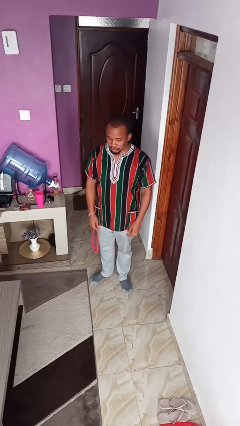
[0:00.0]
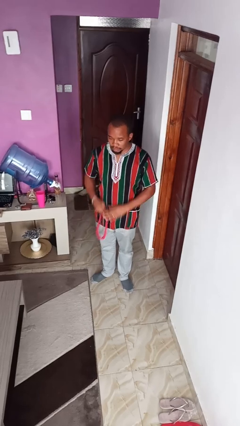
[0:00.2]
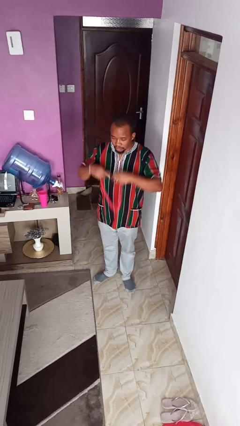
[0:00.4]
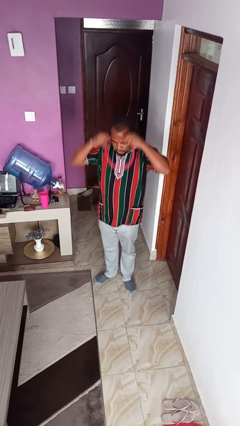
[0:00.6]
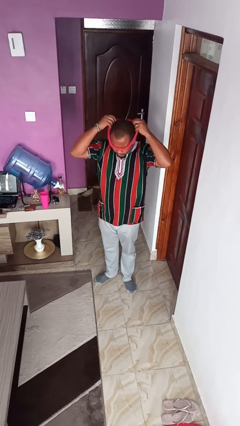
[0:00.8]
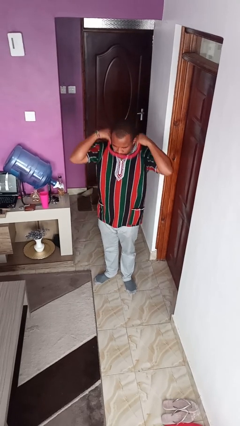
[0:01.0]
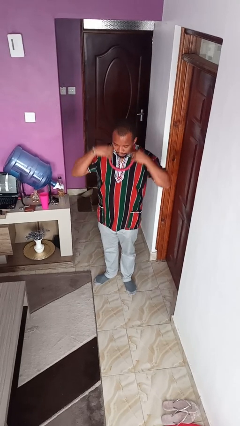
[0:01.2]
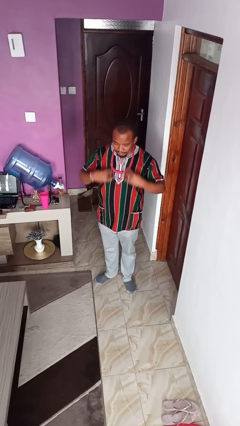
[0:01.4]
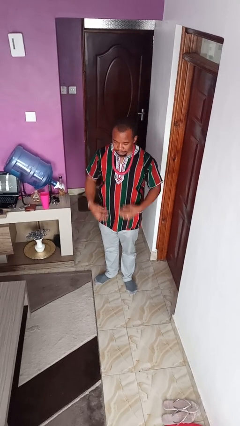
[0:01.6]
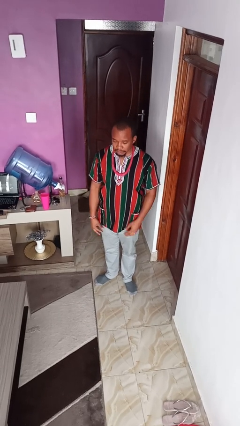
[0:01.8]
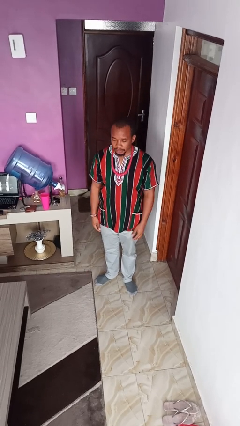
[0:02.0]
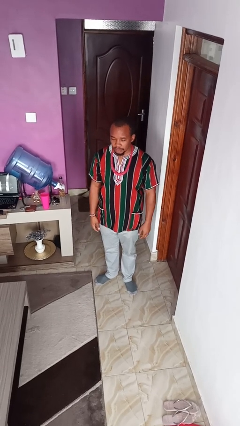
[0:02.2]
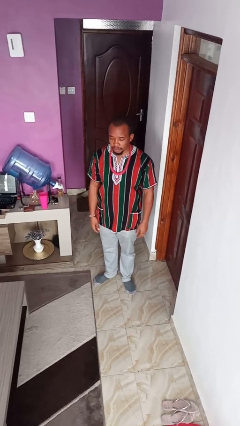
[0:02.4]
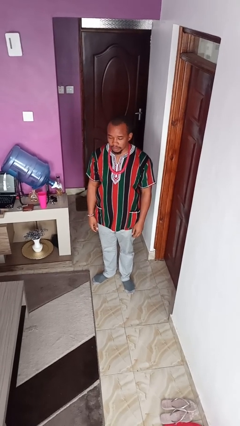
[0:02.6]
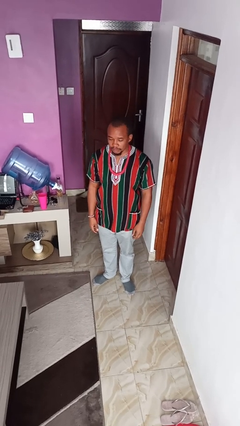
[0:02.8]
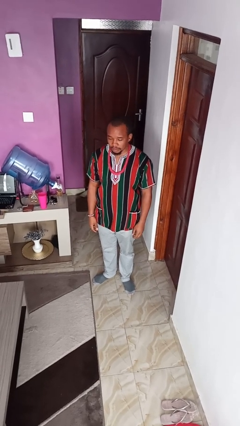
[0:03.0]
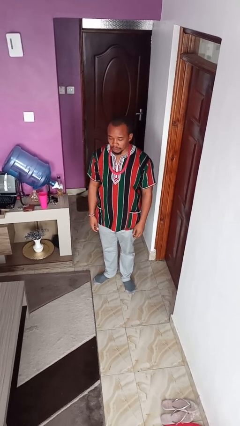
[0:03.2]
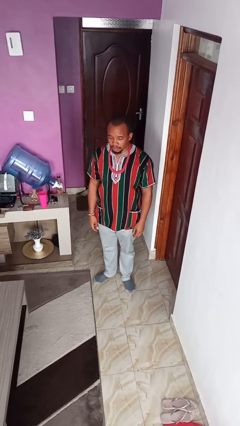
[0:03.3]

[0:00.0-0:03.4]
person puts on necklace

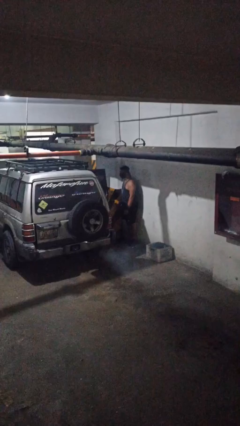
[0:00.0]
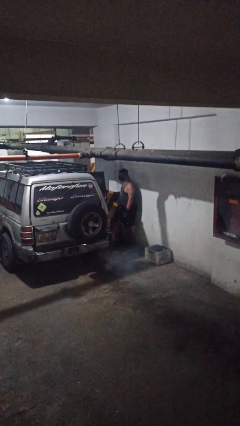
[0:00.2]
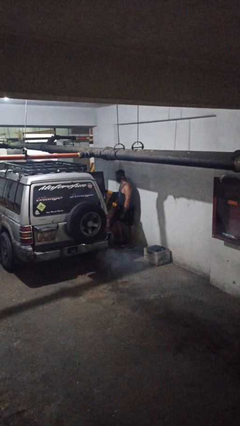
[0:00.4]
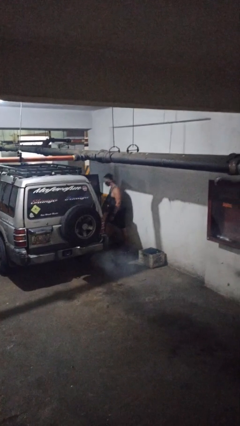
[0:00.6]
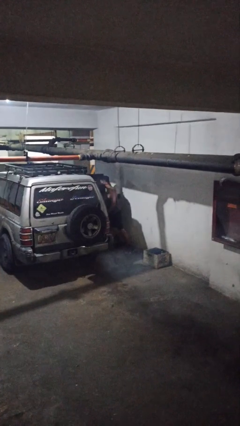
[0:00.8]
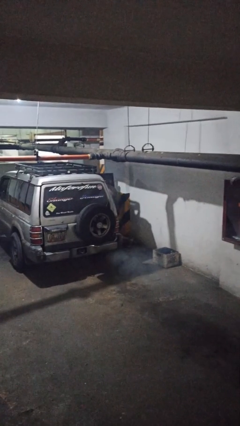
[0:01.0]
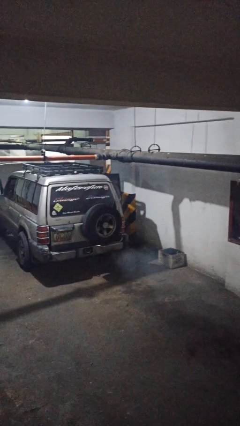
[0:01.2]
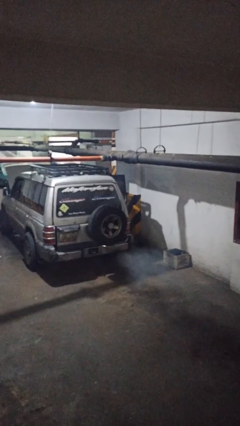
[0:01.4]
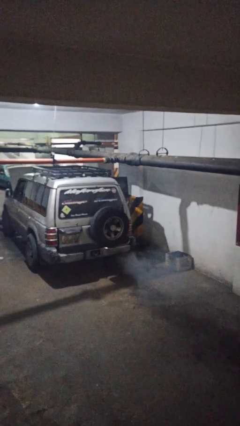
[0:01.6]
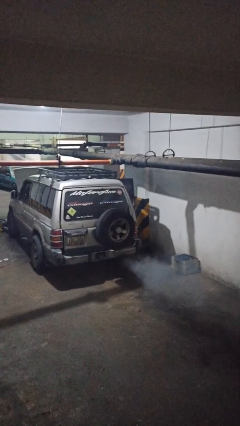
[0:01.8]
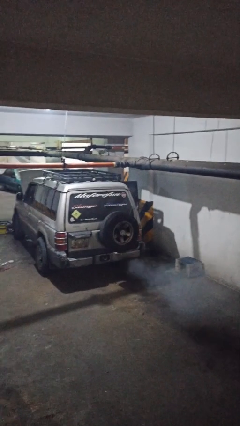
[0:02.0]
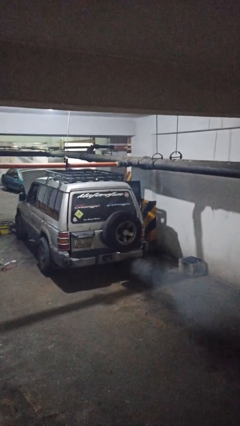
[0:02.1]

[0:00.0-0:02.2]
person enters car

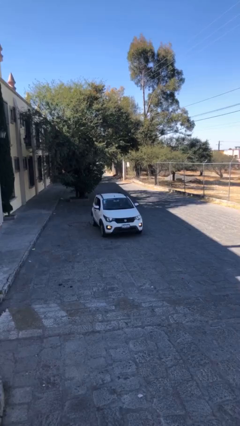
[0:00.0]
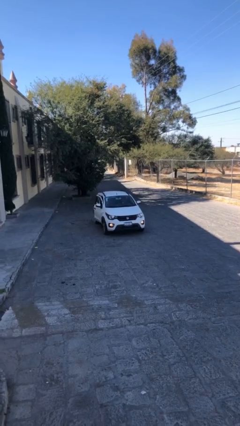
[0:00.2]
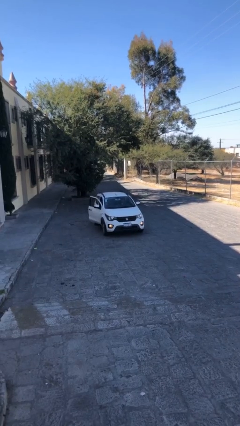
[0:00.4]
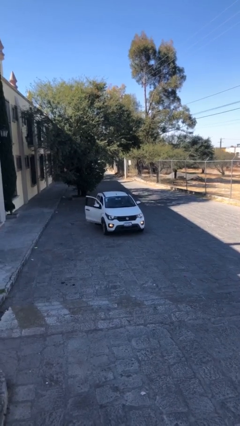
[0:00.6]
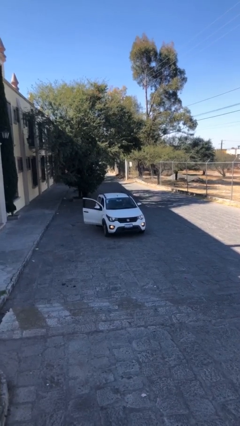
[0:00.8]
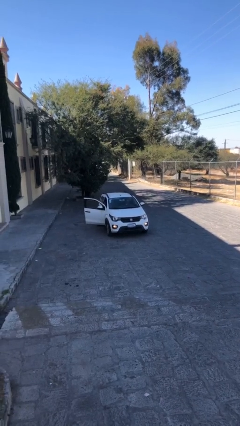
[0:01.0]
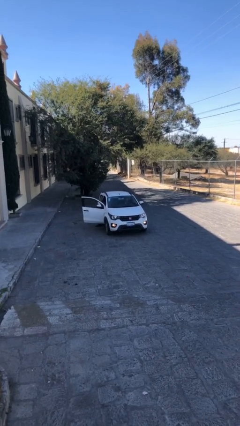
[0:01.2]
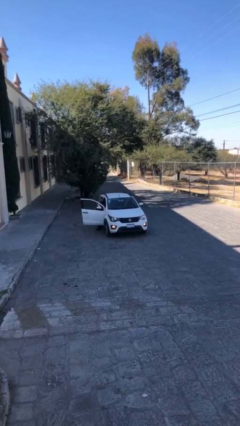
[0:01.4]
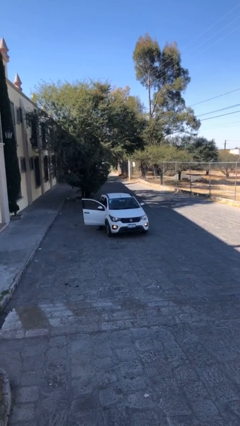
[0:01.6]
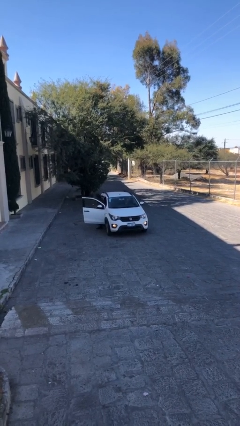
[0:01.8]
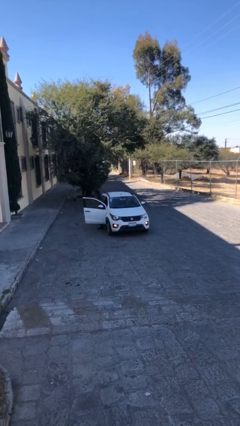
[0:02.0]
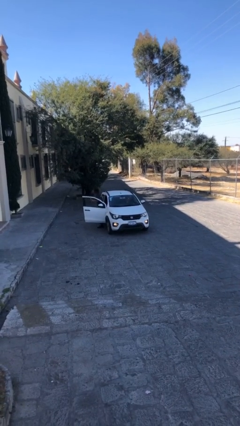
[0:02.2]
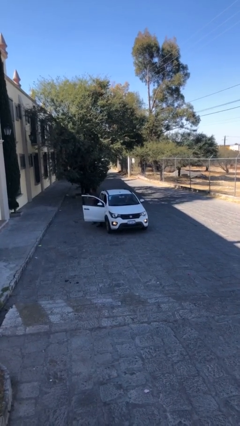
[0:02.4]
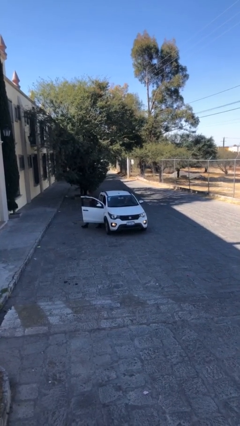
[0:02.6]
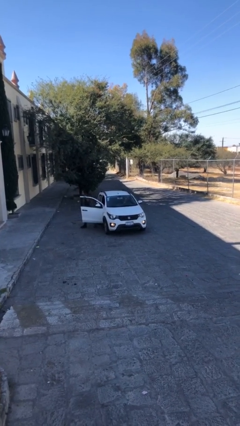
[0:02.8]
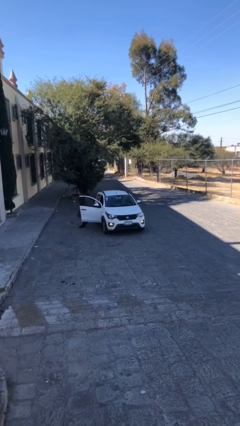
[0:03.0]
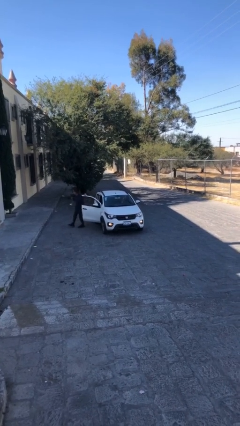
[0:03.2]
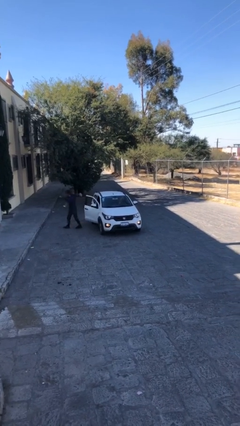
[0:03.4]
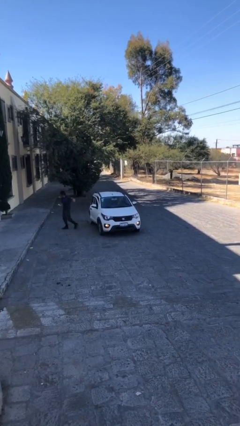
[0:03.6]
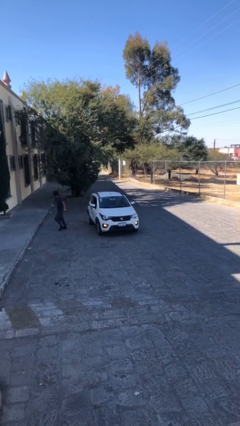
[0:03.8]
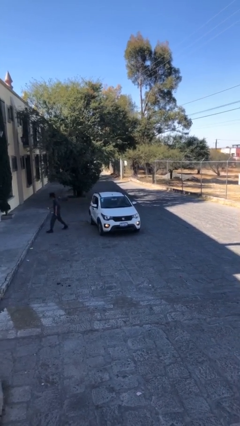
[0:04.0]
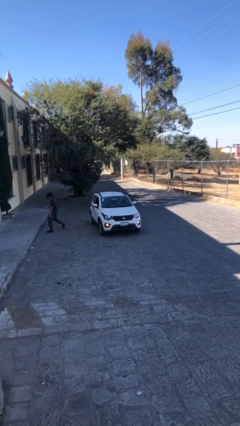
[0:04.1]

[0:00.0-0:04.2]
car drops off person

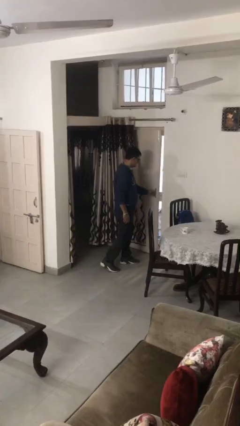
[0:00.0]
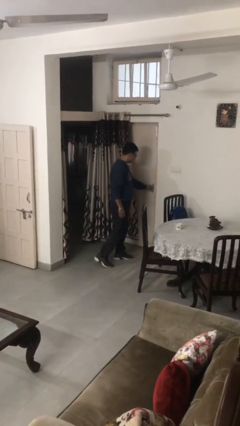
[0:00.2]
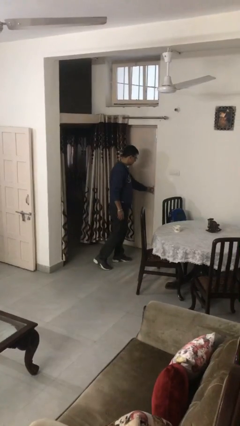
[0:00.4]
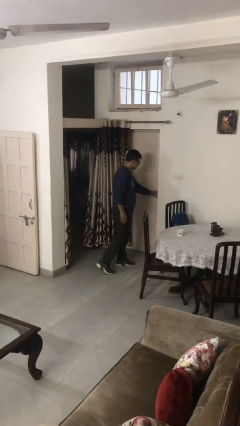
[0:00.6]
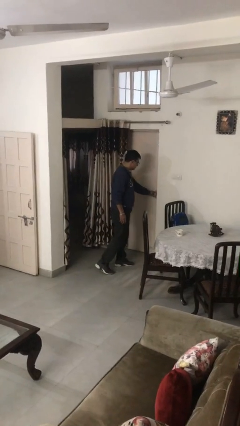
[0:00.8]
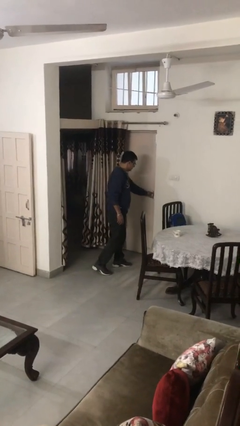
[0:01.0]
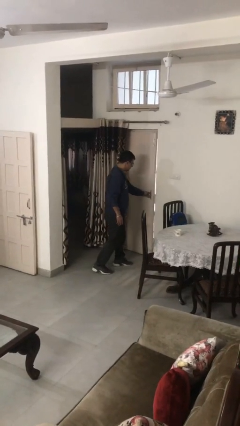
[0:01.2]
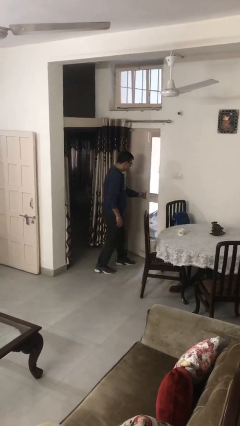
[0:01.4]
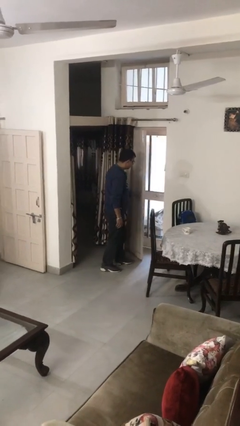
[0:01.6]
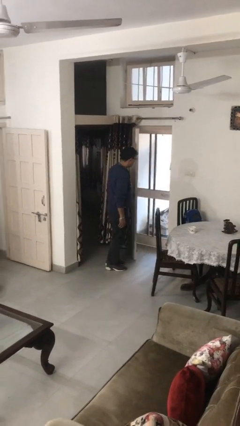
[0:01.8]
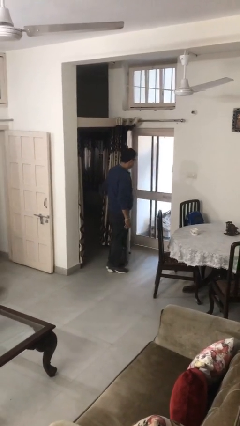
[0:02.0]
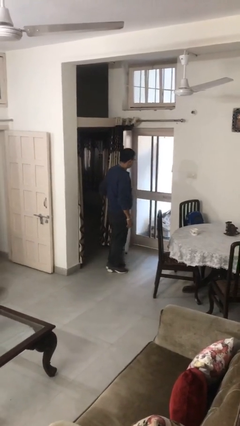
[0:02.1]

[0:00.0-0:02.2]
person opens facility door

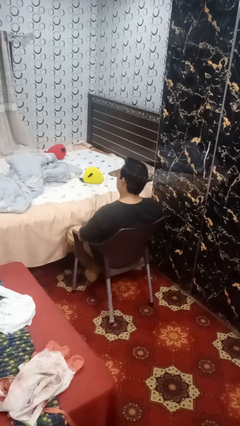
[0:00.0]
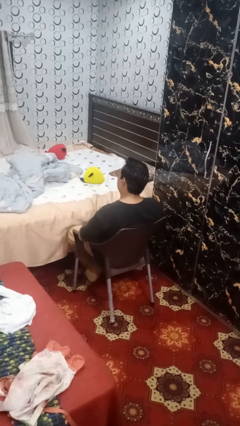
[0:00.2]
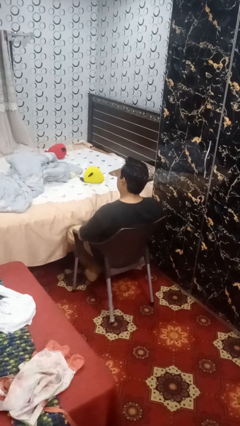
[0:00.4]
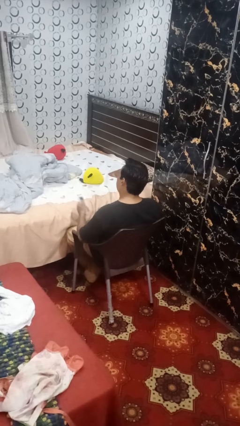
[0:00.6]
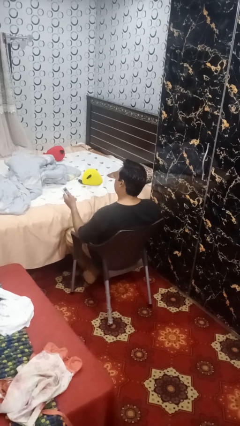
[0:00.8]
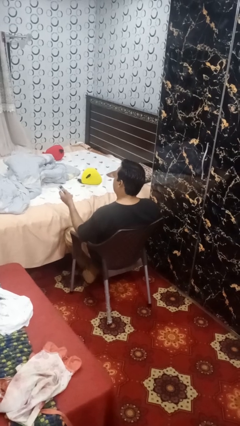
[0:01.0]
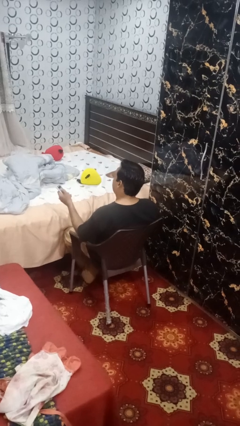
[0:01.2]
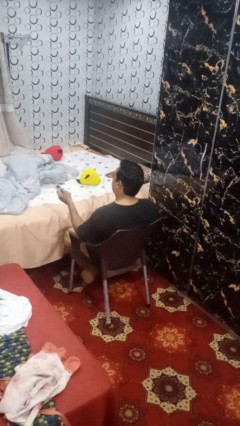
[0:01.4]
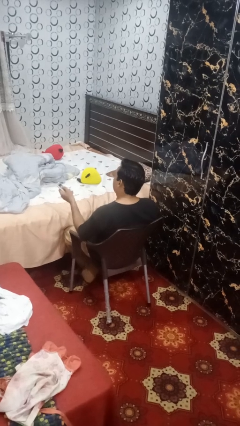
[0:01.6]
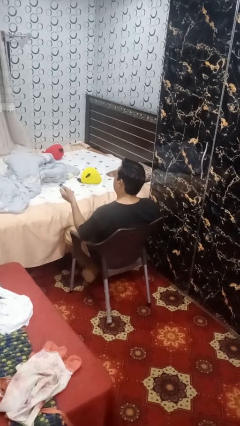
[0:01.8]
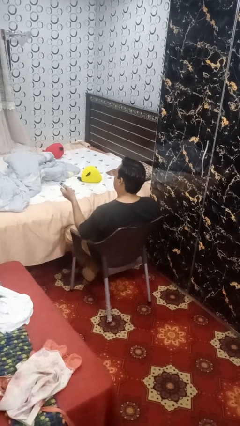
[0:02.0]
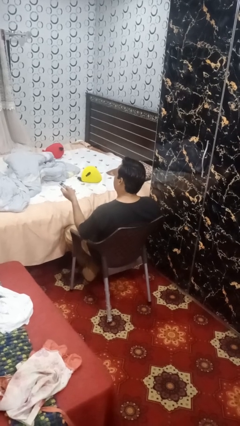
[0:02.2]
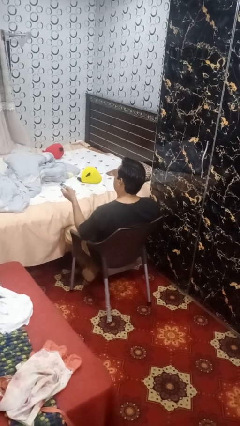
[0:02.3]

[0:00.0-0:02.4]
person uses television remote

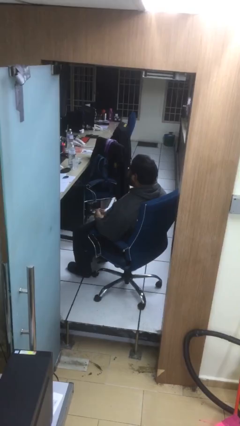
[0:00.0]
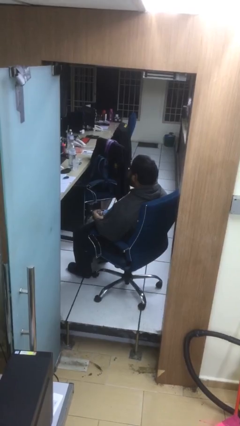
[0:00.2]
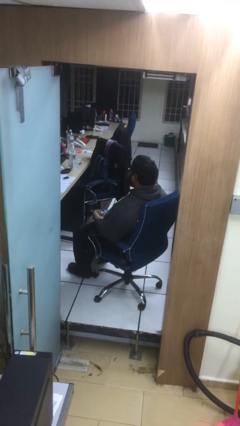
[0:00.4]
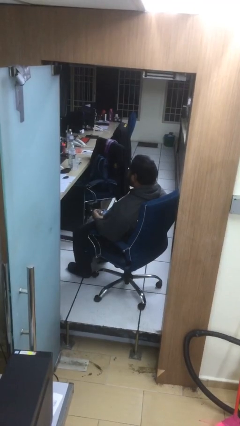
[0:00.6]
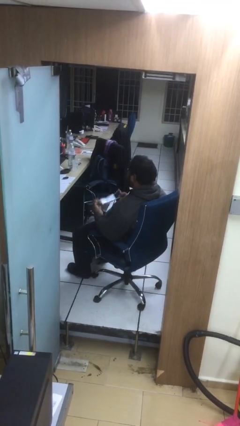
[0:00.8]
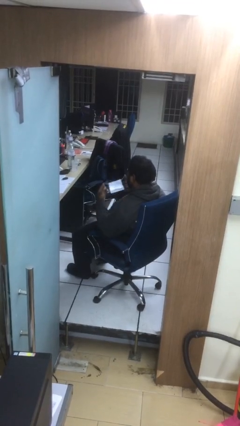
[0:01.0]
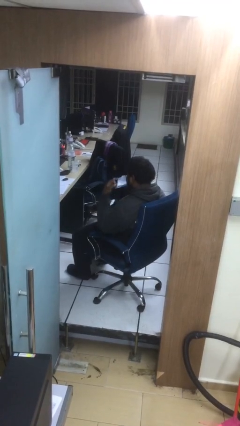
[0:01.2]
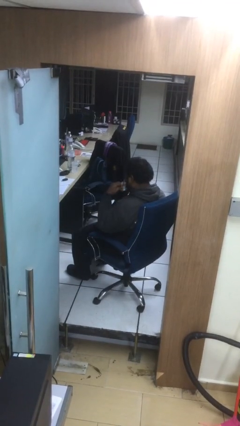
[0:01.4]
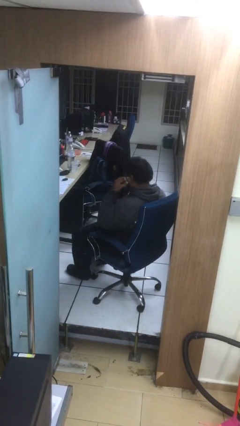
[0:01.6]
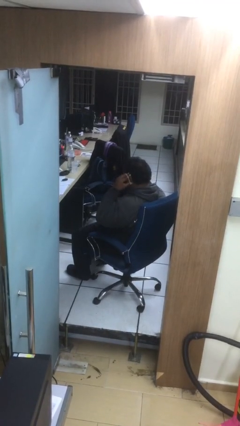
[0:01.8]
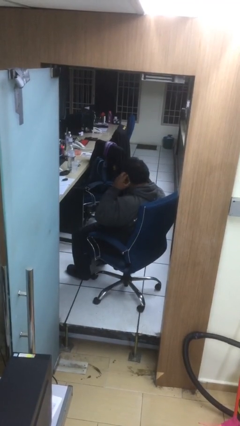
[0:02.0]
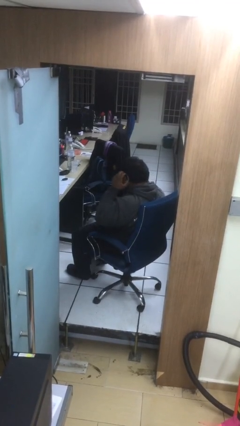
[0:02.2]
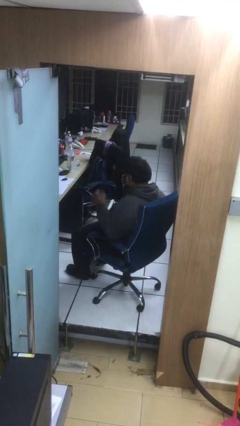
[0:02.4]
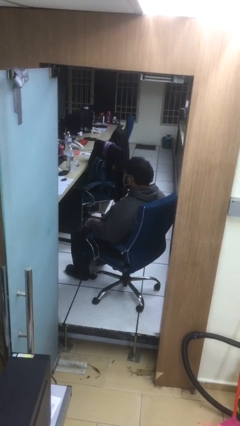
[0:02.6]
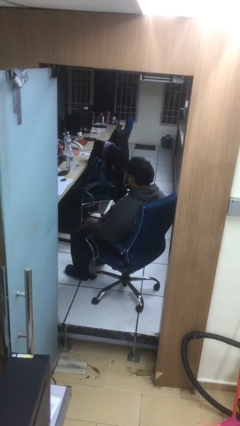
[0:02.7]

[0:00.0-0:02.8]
person puts on facemask

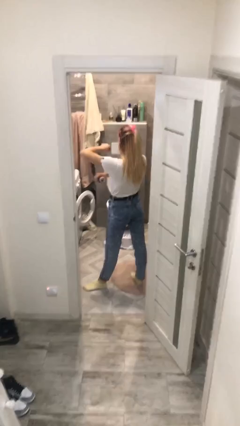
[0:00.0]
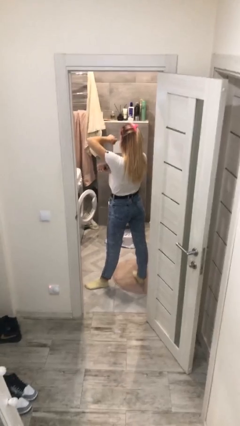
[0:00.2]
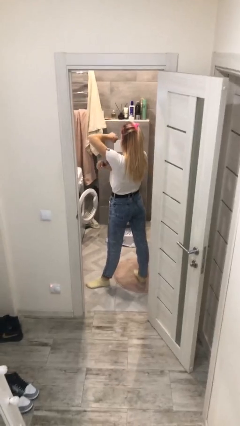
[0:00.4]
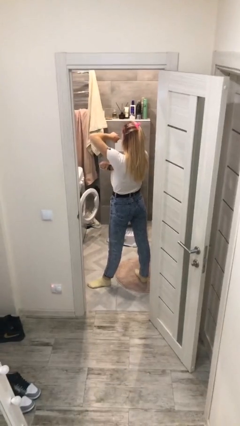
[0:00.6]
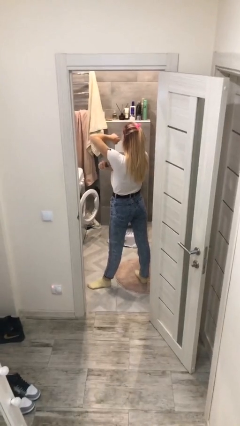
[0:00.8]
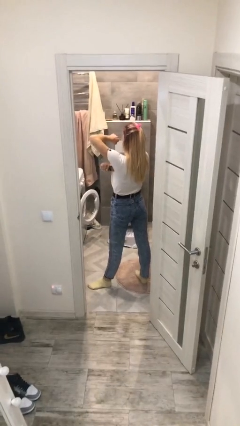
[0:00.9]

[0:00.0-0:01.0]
person applies deodorant
